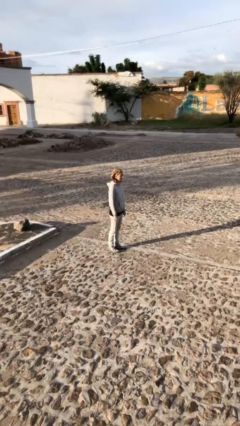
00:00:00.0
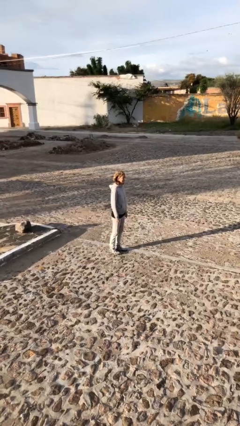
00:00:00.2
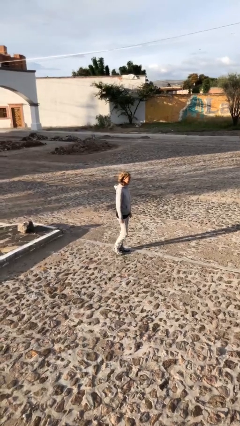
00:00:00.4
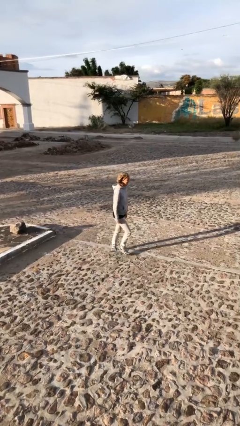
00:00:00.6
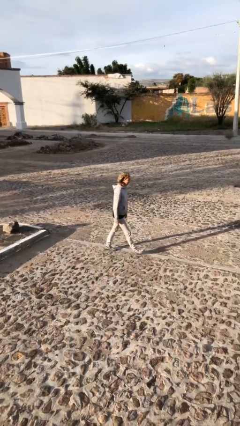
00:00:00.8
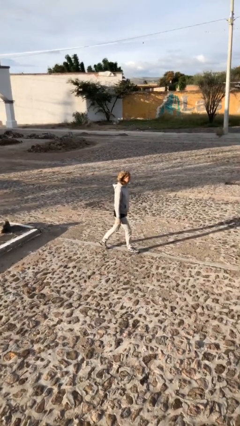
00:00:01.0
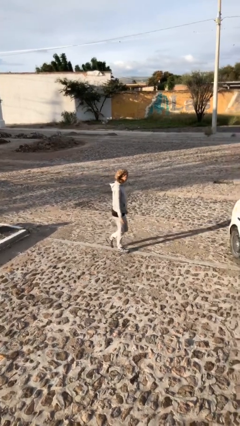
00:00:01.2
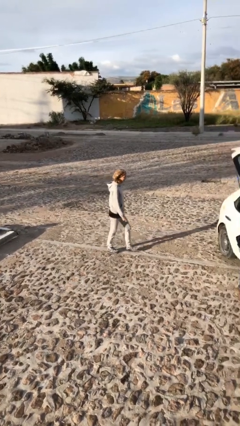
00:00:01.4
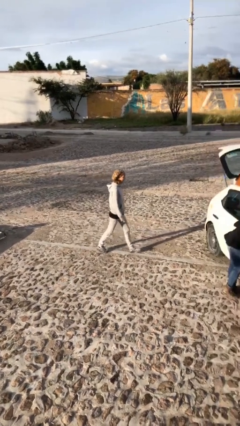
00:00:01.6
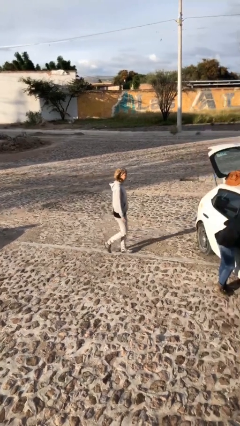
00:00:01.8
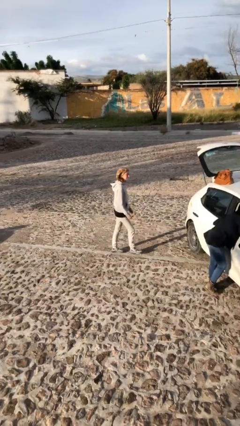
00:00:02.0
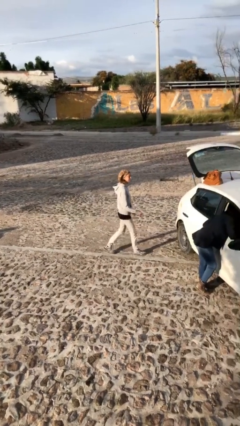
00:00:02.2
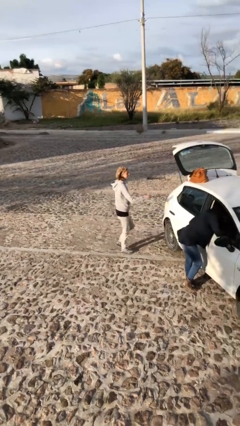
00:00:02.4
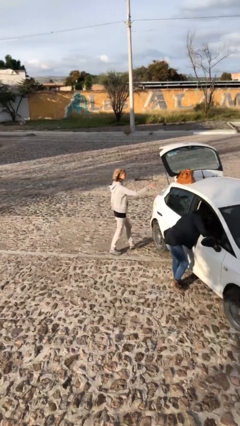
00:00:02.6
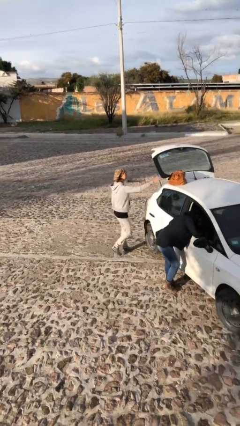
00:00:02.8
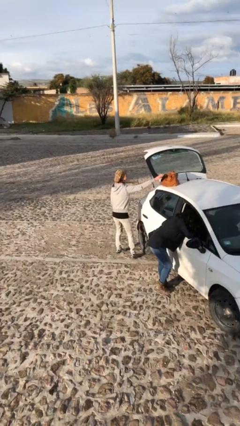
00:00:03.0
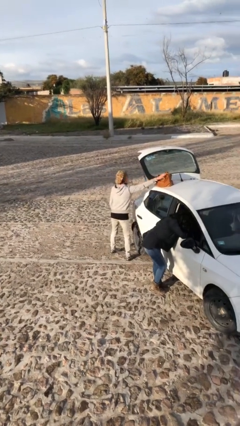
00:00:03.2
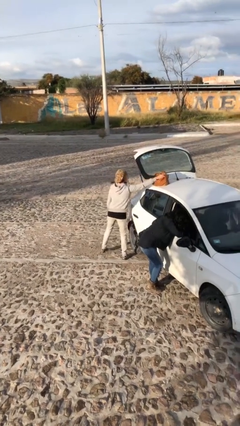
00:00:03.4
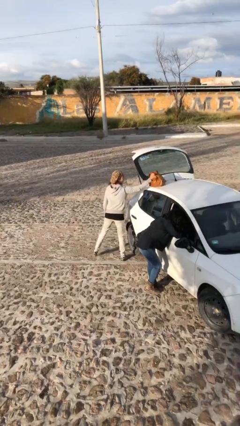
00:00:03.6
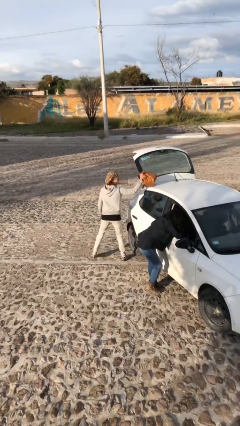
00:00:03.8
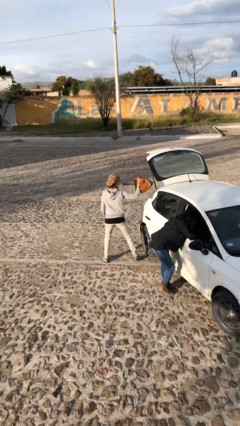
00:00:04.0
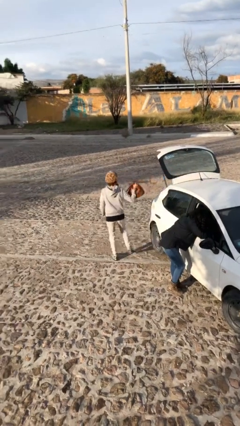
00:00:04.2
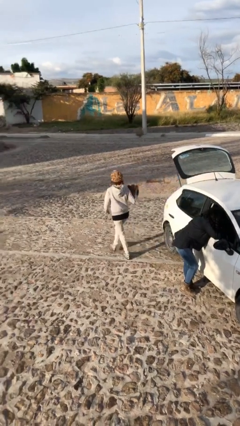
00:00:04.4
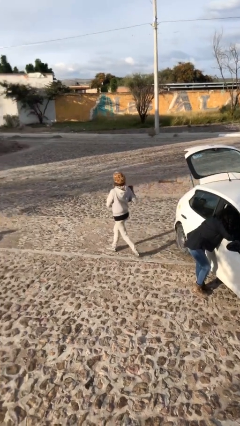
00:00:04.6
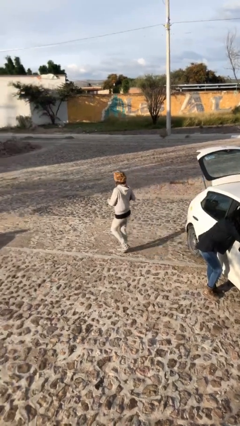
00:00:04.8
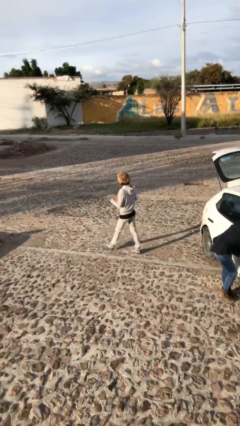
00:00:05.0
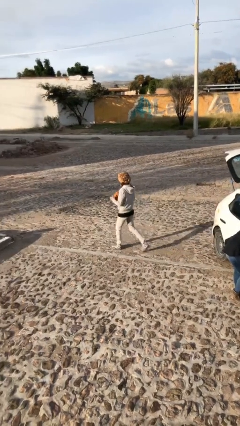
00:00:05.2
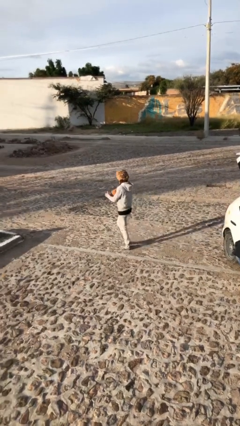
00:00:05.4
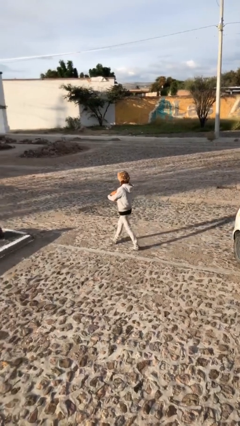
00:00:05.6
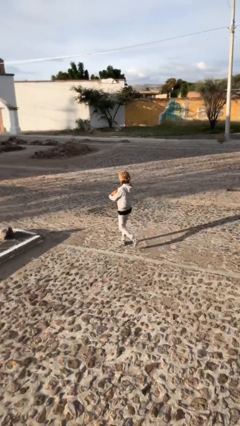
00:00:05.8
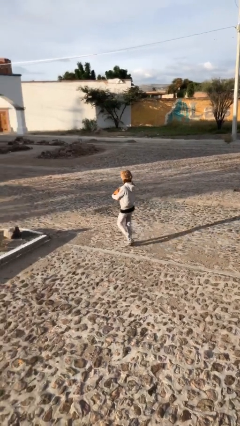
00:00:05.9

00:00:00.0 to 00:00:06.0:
person steals object from person

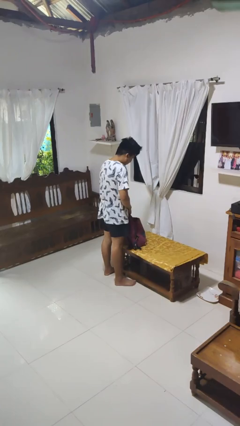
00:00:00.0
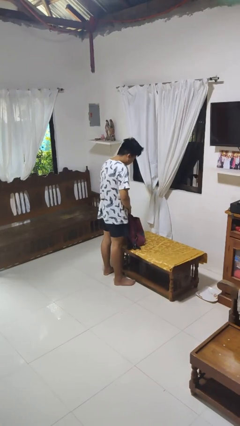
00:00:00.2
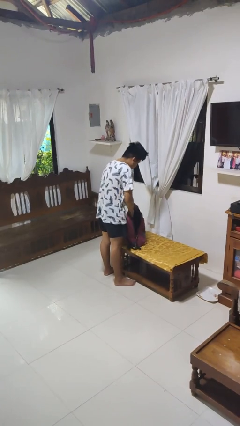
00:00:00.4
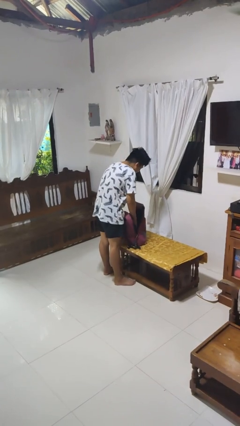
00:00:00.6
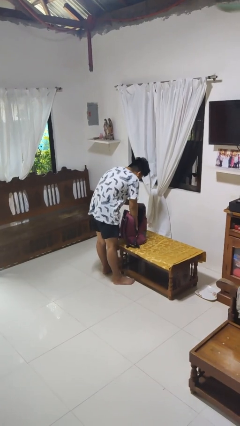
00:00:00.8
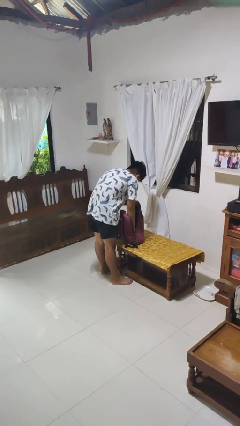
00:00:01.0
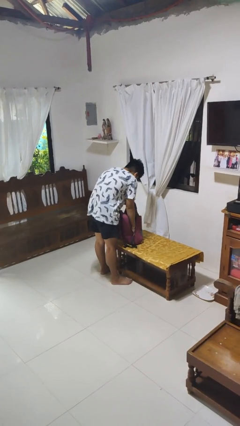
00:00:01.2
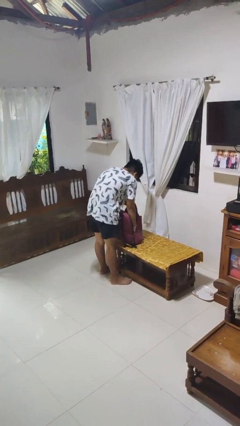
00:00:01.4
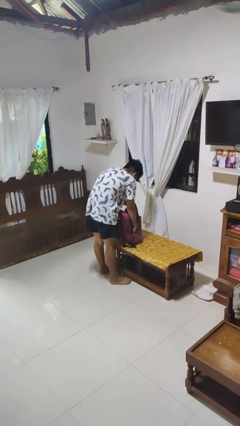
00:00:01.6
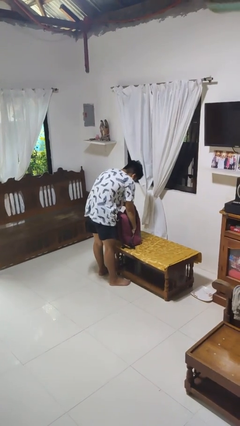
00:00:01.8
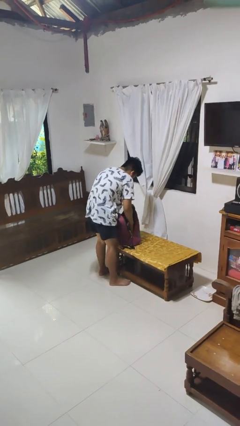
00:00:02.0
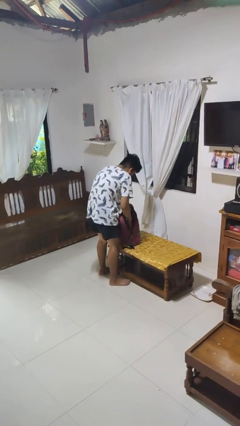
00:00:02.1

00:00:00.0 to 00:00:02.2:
person searches in bag

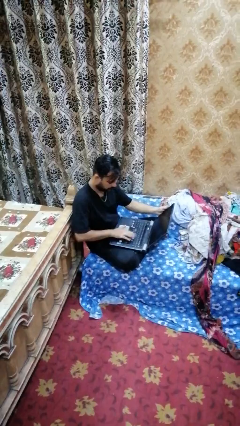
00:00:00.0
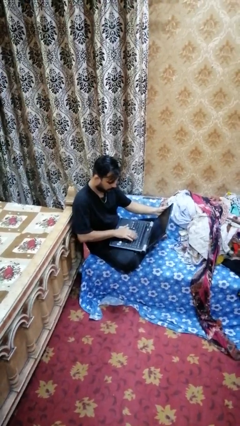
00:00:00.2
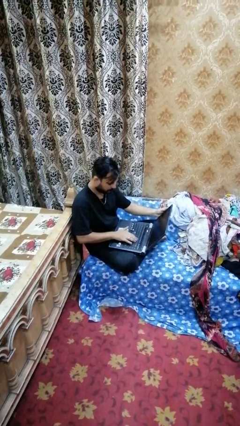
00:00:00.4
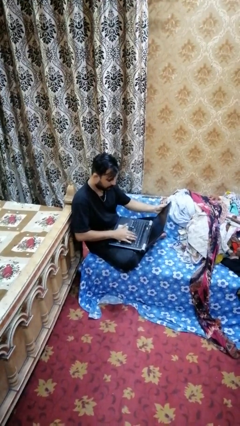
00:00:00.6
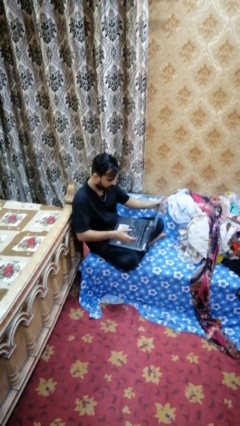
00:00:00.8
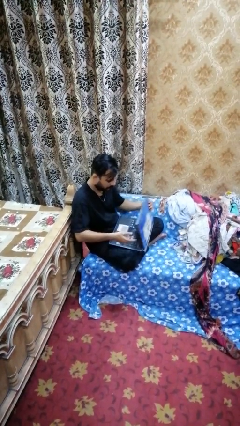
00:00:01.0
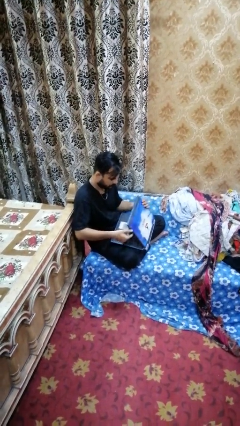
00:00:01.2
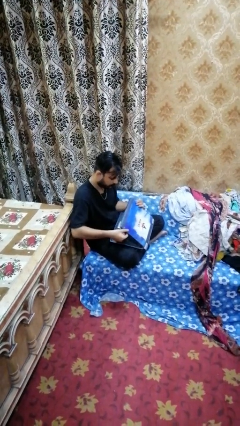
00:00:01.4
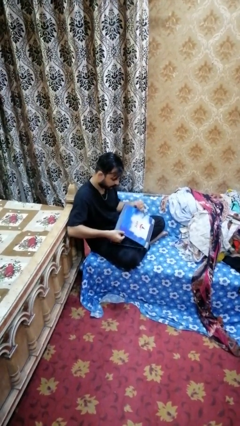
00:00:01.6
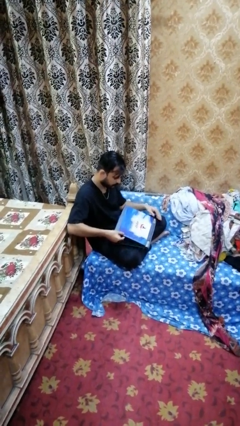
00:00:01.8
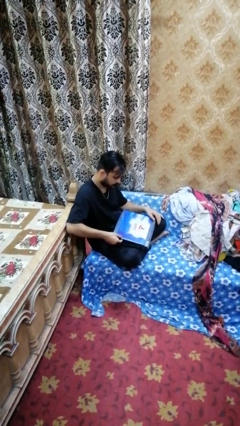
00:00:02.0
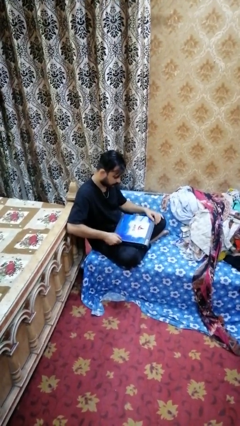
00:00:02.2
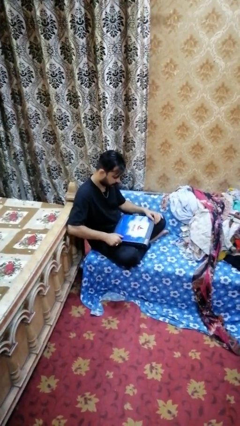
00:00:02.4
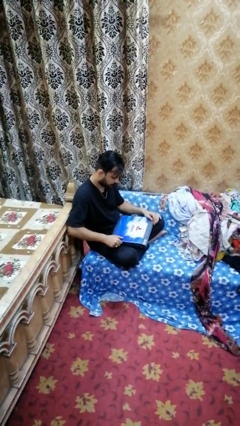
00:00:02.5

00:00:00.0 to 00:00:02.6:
person closes laptop

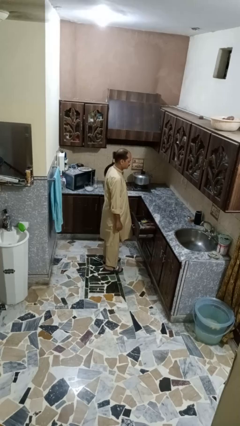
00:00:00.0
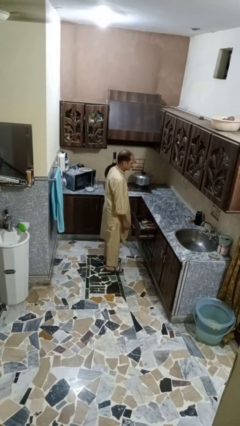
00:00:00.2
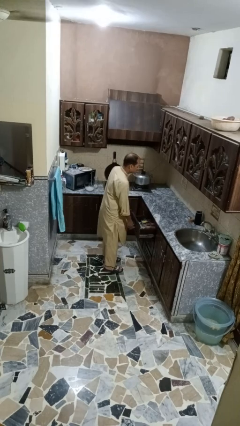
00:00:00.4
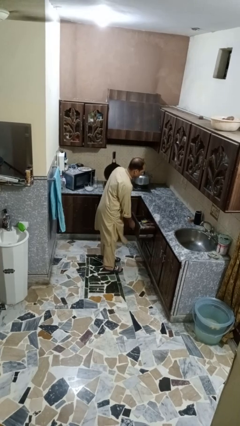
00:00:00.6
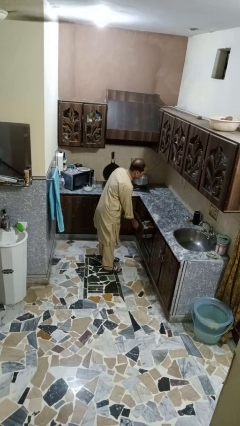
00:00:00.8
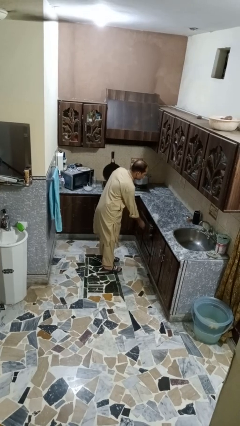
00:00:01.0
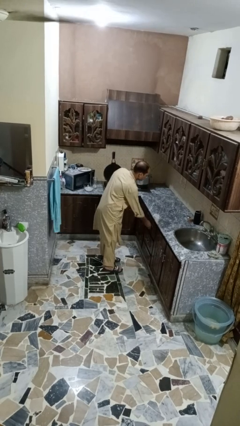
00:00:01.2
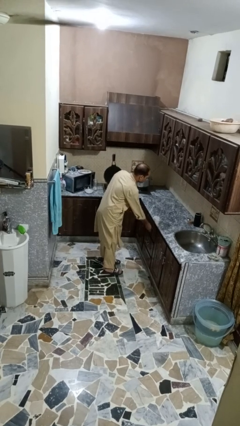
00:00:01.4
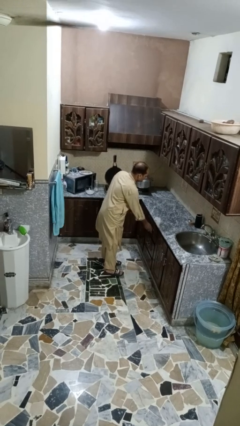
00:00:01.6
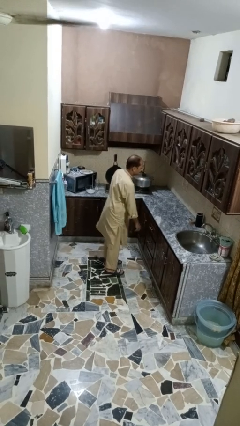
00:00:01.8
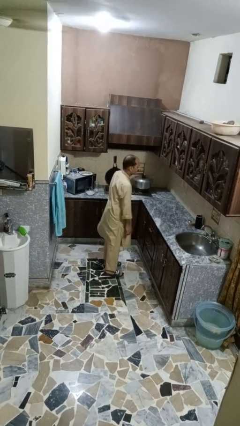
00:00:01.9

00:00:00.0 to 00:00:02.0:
person closes kitchen drawer

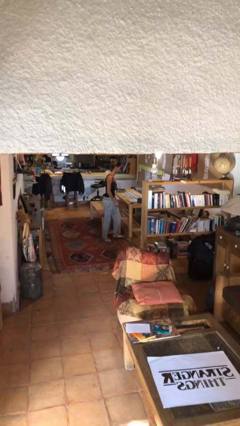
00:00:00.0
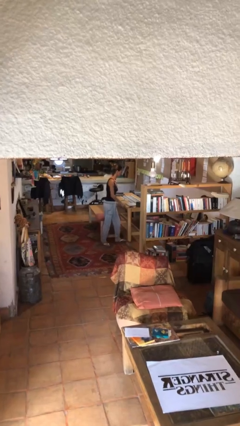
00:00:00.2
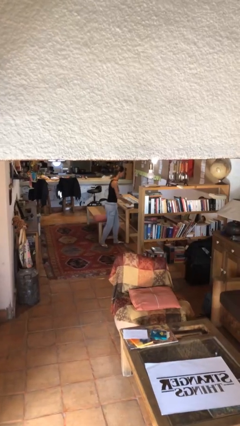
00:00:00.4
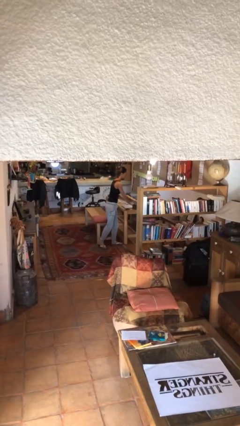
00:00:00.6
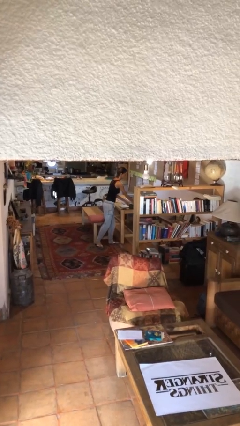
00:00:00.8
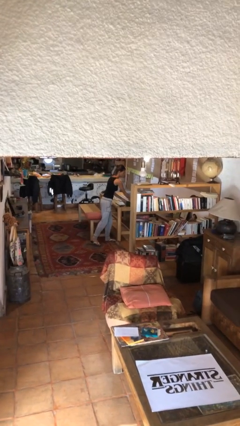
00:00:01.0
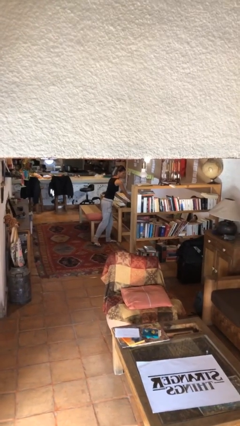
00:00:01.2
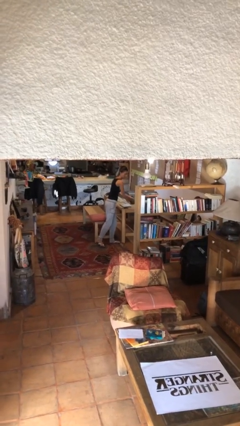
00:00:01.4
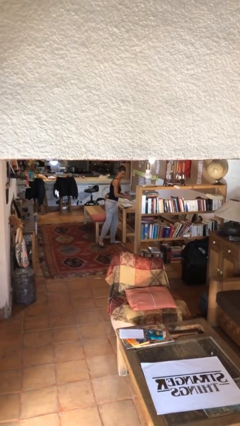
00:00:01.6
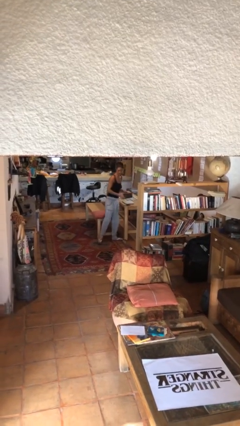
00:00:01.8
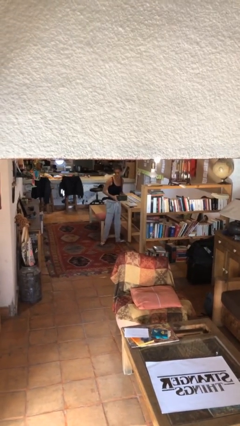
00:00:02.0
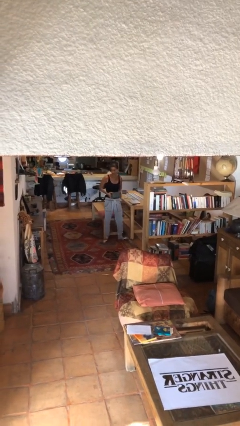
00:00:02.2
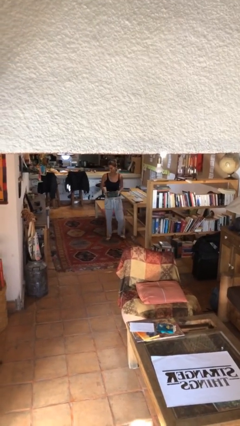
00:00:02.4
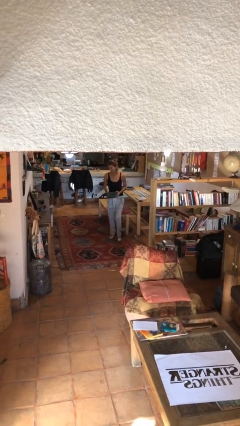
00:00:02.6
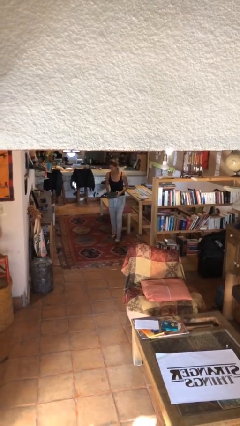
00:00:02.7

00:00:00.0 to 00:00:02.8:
person picks up object from table

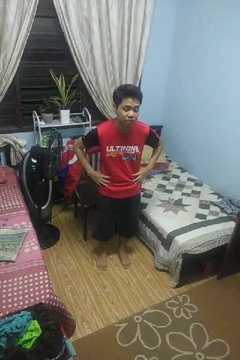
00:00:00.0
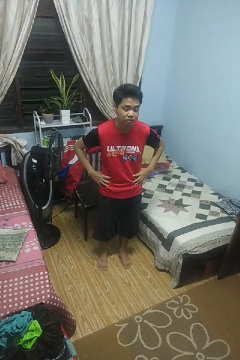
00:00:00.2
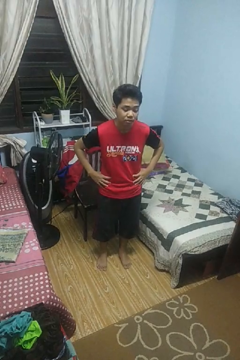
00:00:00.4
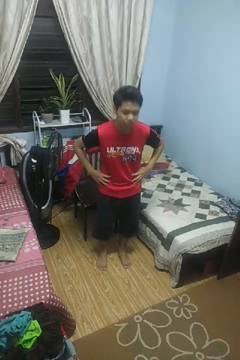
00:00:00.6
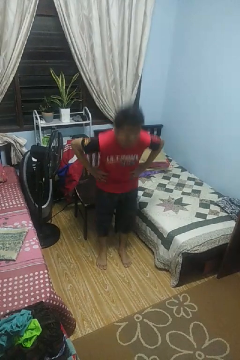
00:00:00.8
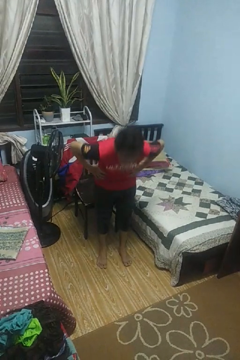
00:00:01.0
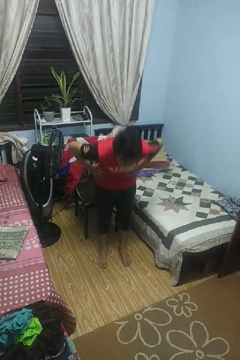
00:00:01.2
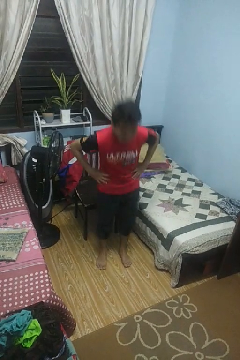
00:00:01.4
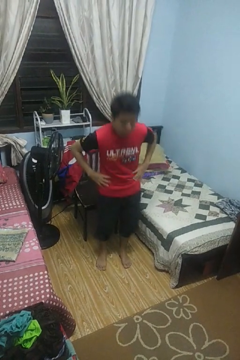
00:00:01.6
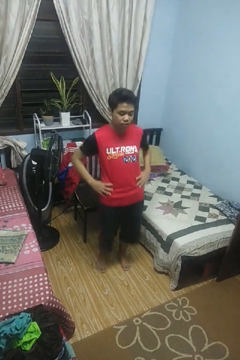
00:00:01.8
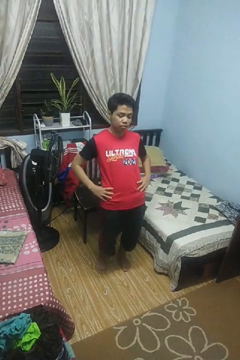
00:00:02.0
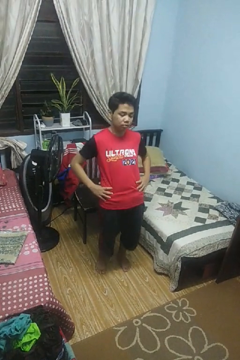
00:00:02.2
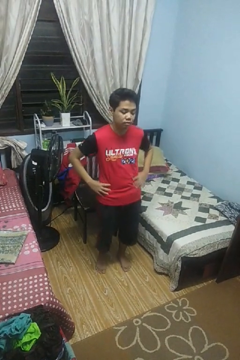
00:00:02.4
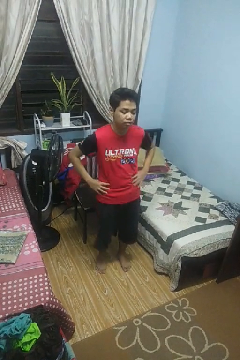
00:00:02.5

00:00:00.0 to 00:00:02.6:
person wiggles hips

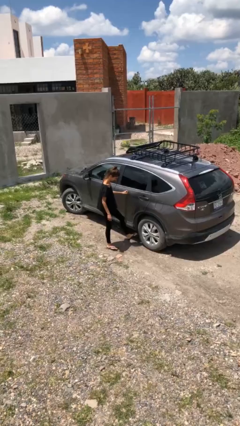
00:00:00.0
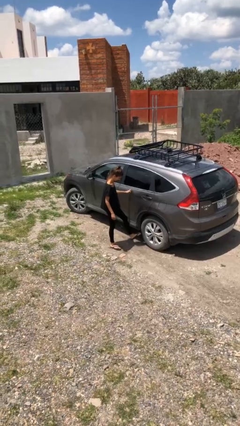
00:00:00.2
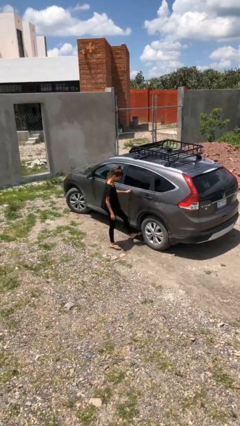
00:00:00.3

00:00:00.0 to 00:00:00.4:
person kicks car tires
